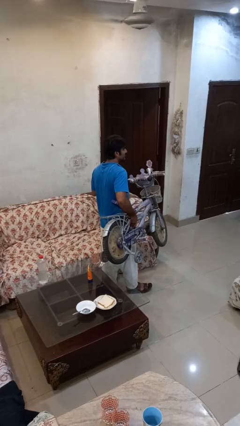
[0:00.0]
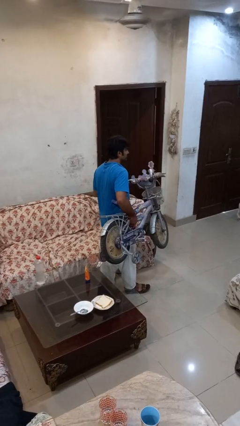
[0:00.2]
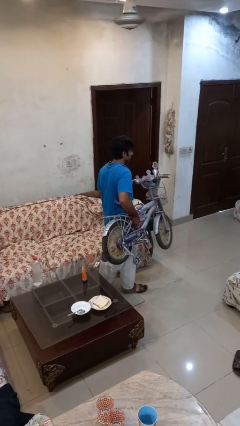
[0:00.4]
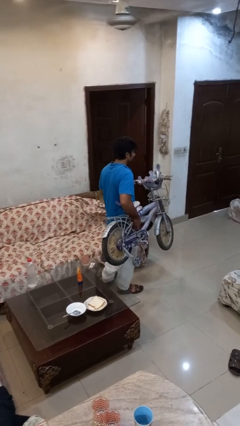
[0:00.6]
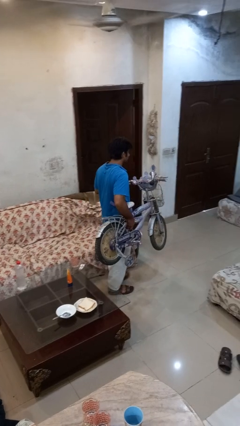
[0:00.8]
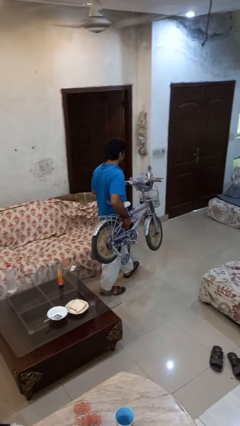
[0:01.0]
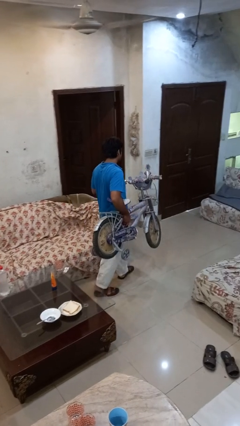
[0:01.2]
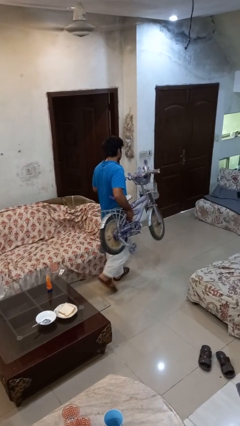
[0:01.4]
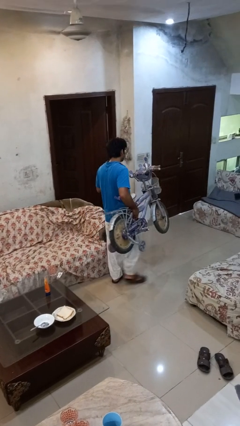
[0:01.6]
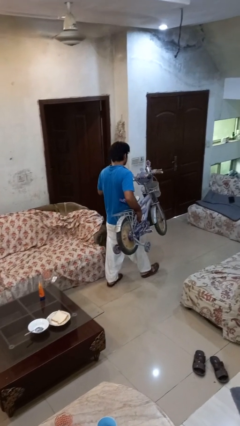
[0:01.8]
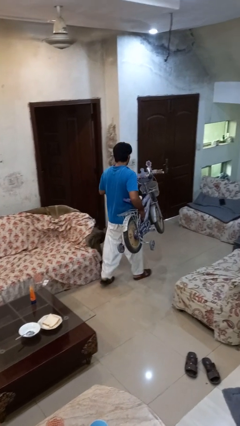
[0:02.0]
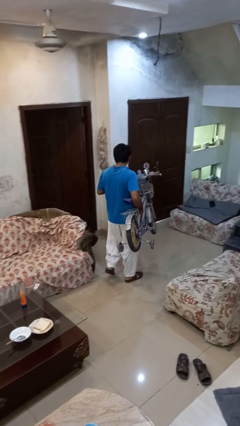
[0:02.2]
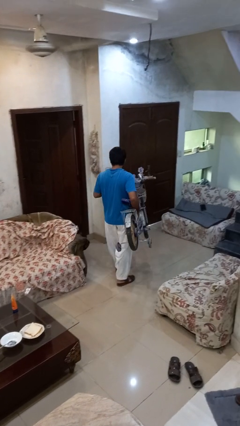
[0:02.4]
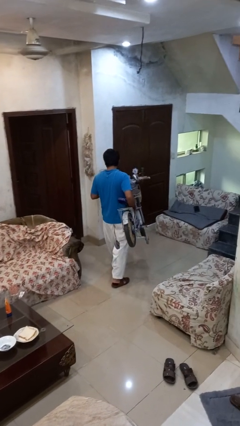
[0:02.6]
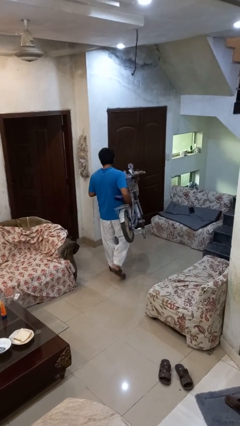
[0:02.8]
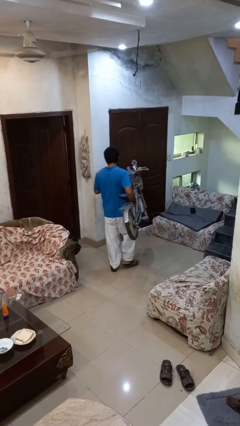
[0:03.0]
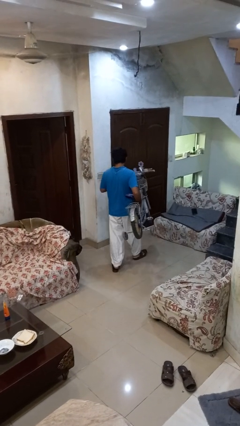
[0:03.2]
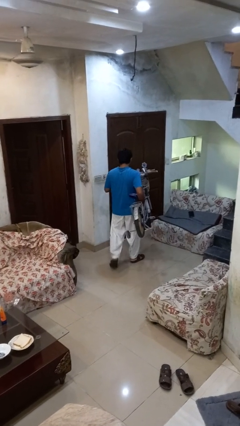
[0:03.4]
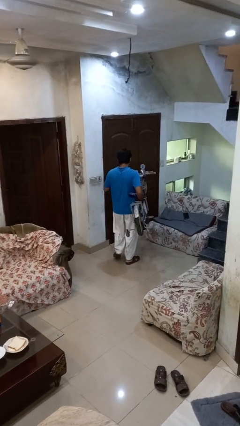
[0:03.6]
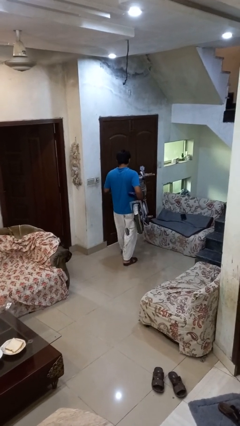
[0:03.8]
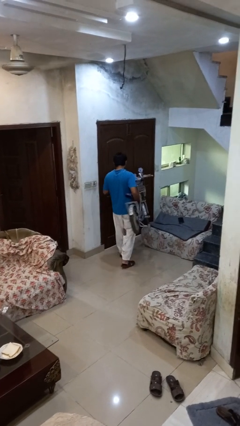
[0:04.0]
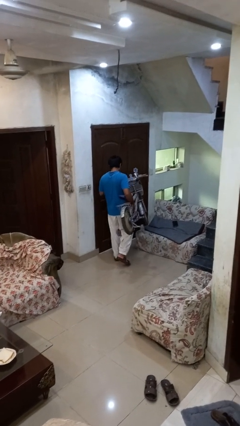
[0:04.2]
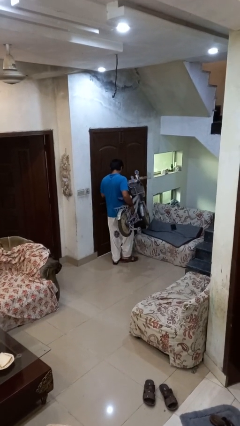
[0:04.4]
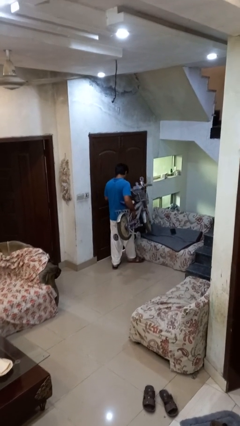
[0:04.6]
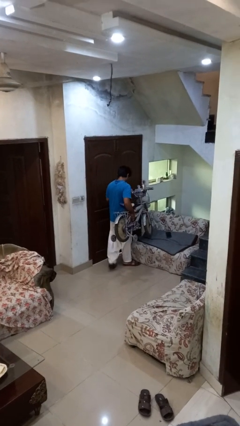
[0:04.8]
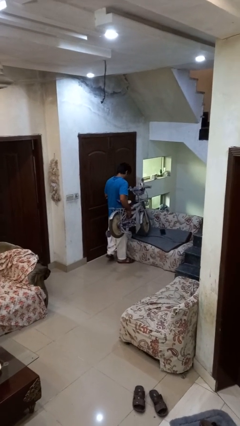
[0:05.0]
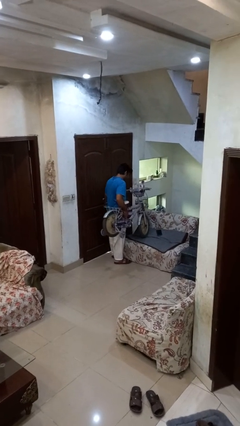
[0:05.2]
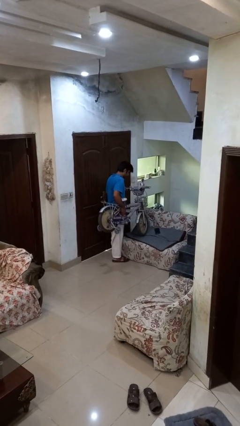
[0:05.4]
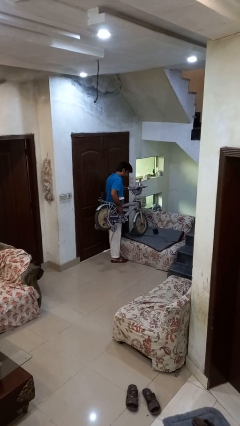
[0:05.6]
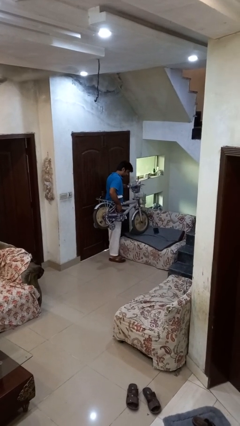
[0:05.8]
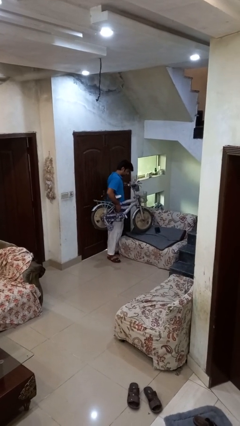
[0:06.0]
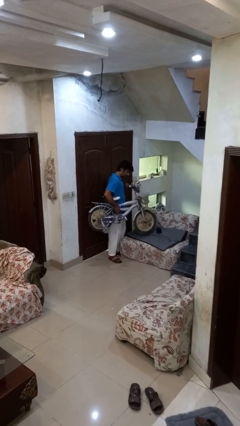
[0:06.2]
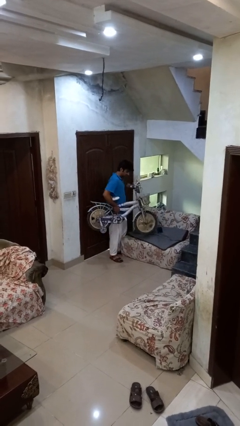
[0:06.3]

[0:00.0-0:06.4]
person carries bicycle

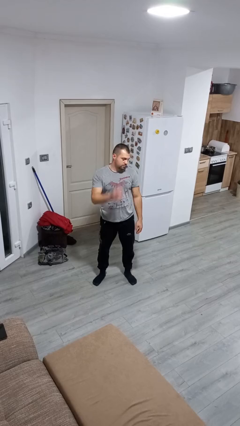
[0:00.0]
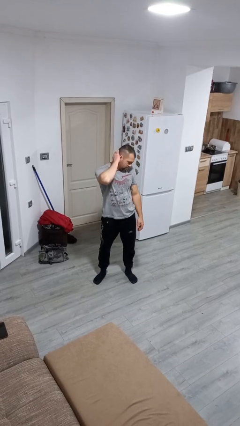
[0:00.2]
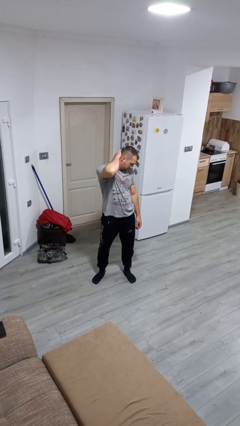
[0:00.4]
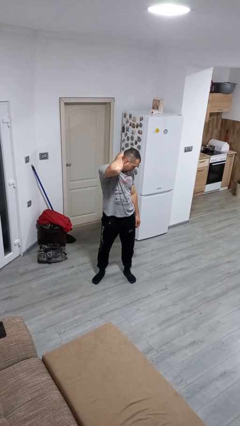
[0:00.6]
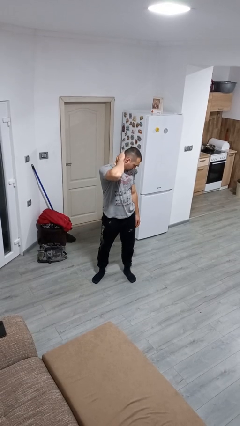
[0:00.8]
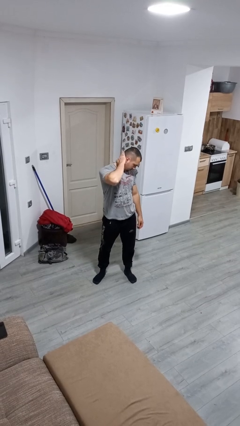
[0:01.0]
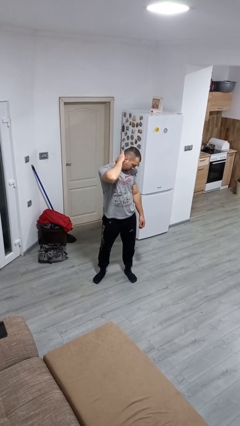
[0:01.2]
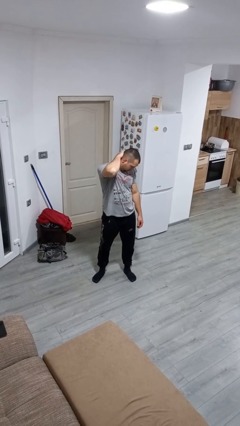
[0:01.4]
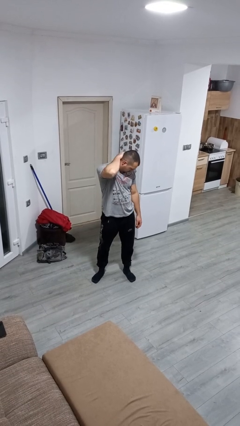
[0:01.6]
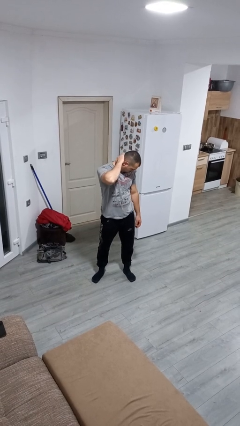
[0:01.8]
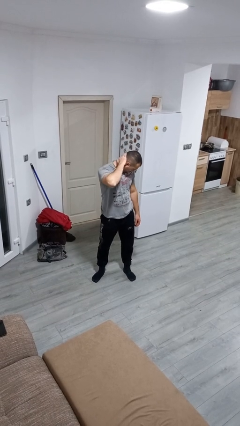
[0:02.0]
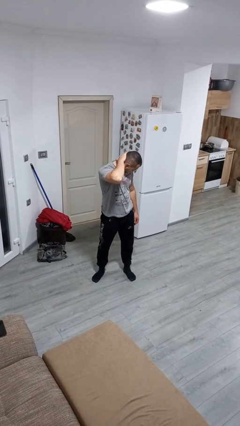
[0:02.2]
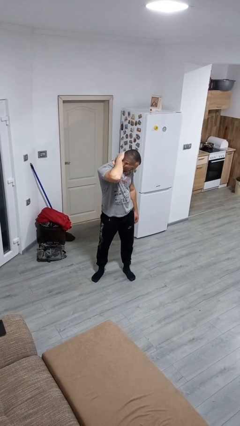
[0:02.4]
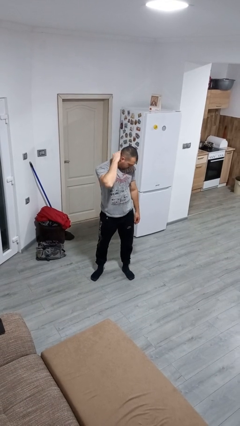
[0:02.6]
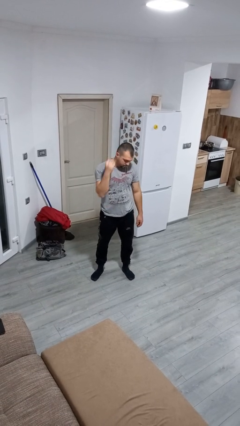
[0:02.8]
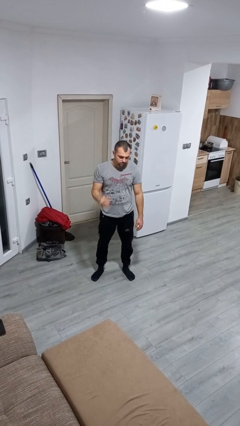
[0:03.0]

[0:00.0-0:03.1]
person rubs neck

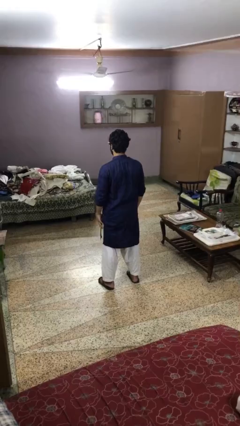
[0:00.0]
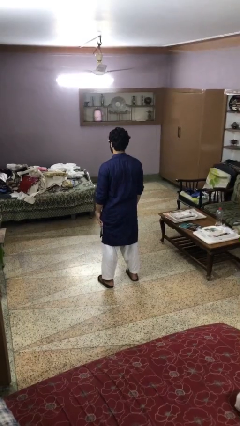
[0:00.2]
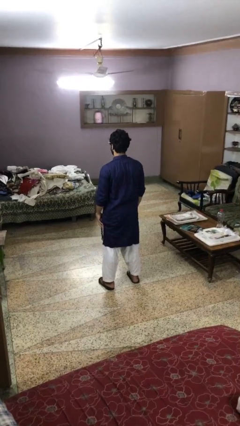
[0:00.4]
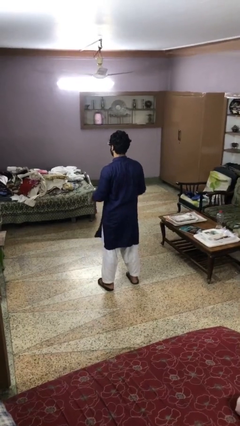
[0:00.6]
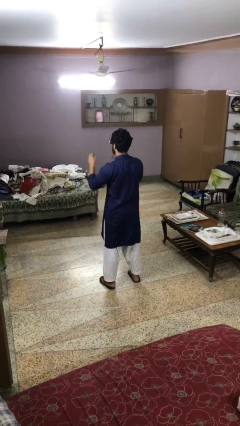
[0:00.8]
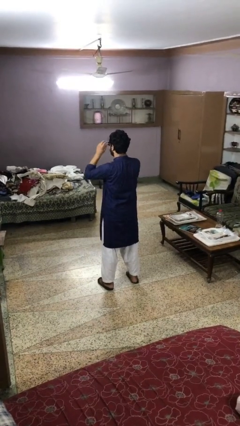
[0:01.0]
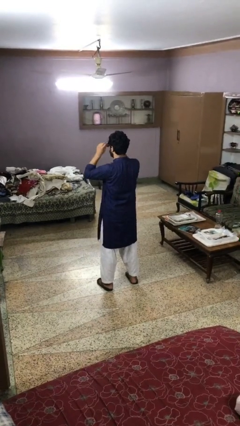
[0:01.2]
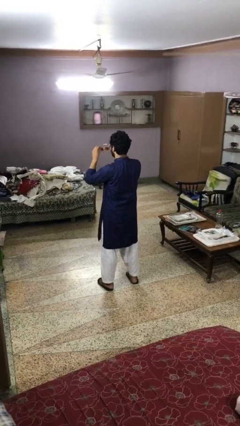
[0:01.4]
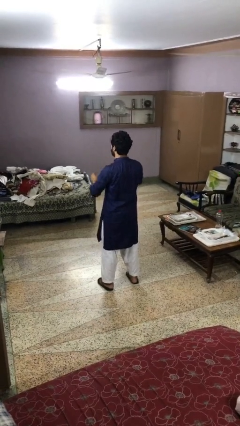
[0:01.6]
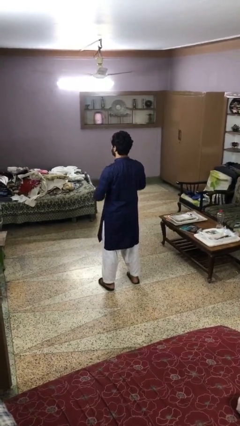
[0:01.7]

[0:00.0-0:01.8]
person takes off sunglasses

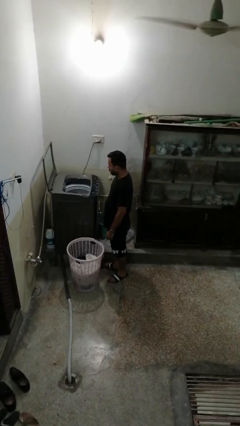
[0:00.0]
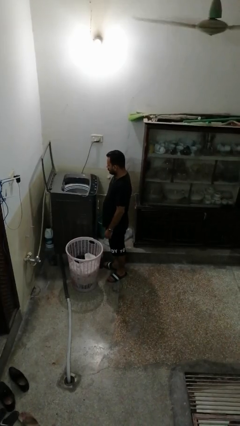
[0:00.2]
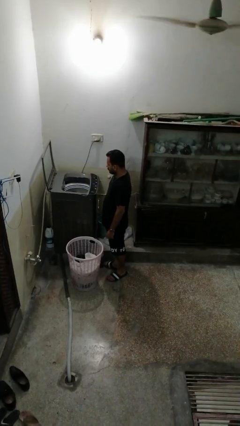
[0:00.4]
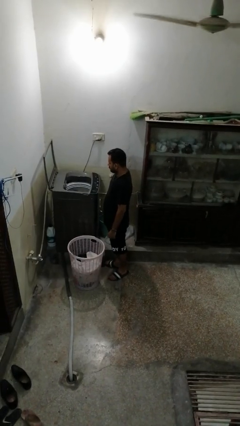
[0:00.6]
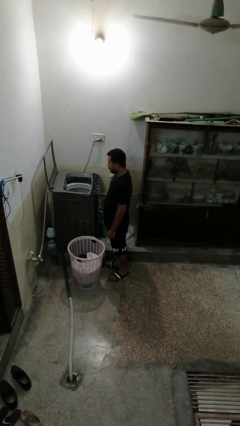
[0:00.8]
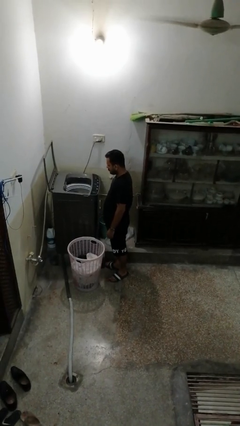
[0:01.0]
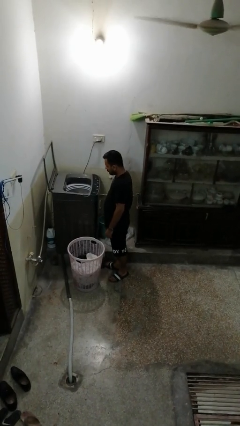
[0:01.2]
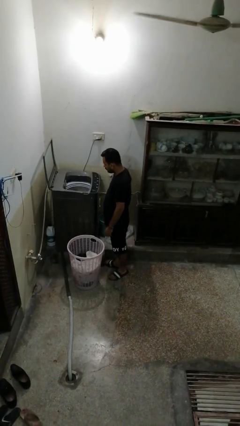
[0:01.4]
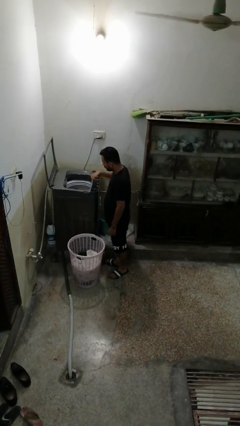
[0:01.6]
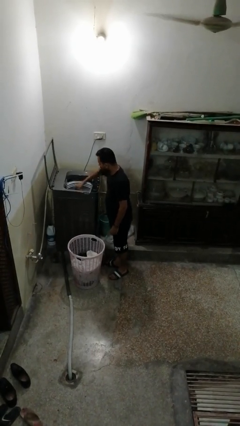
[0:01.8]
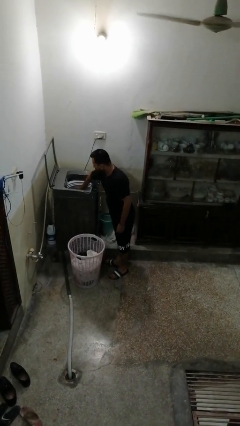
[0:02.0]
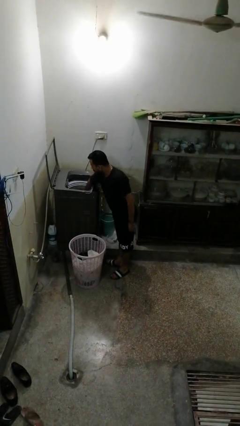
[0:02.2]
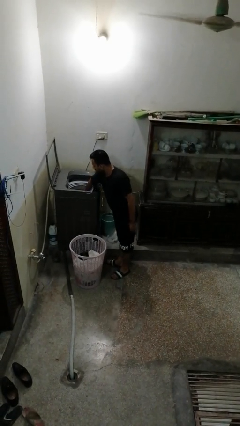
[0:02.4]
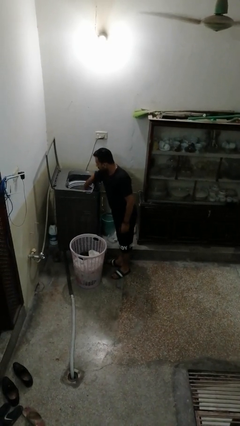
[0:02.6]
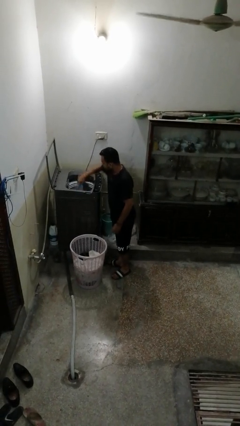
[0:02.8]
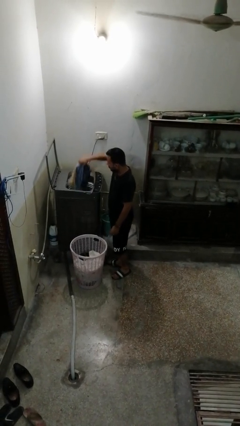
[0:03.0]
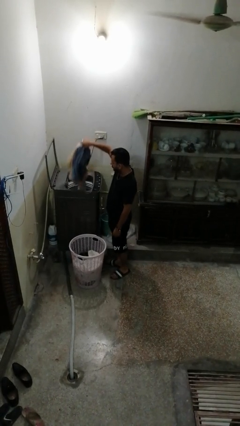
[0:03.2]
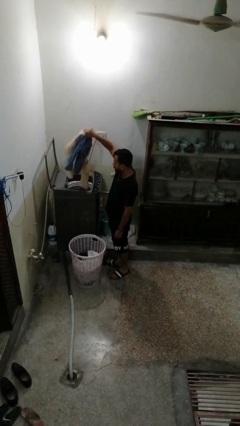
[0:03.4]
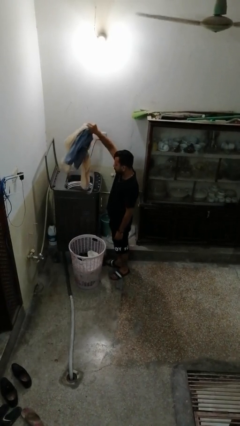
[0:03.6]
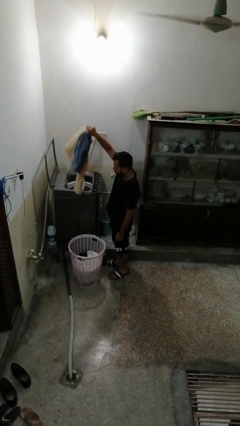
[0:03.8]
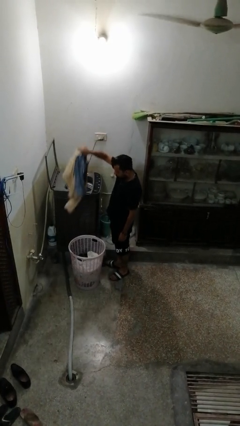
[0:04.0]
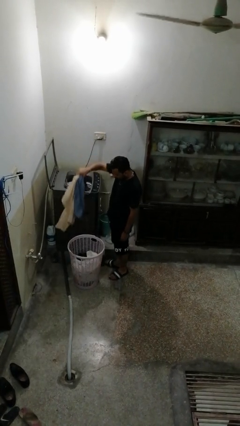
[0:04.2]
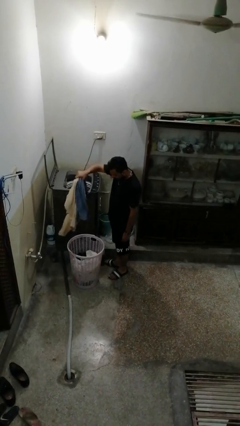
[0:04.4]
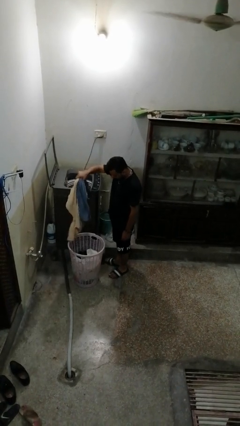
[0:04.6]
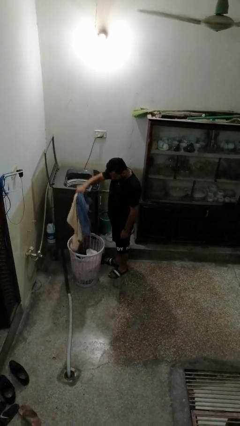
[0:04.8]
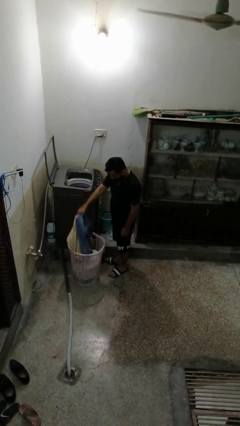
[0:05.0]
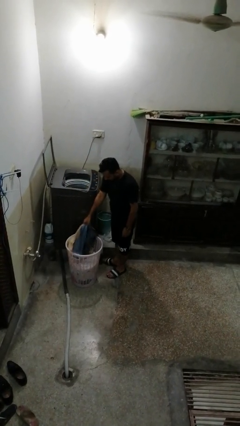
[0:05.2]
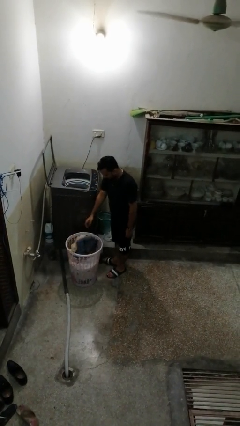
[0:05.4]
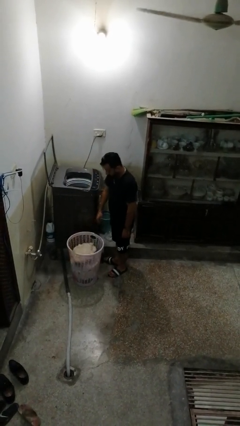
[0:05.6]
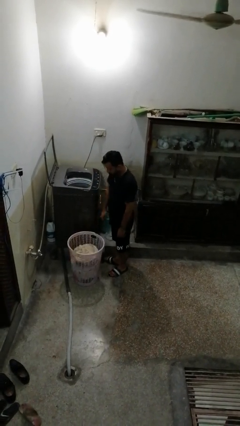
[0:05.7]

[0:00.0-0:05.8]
person unloads dryer

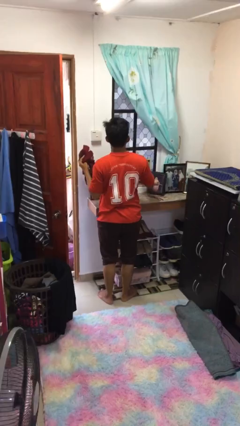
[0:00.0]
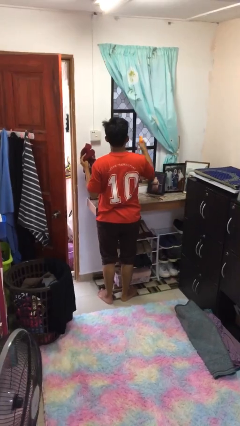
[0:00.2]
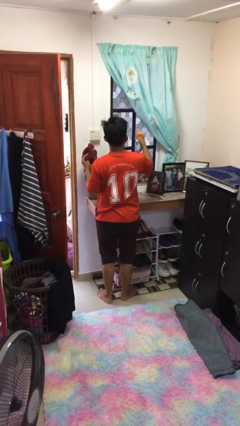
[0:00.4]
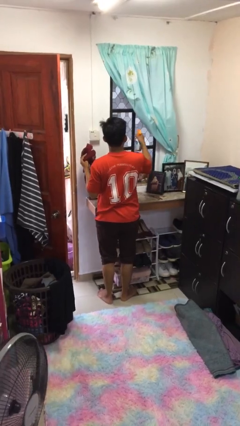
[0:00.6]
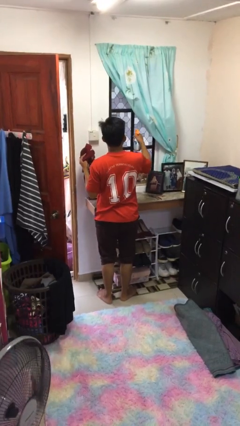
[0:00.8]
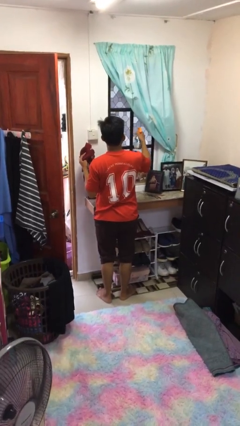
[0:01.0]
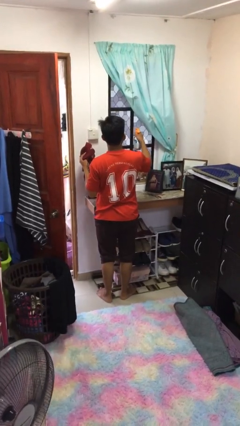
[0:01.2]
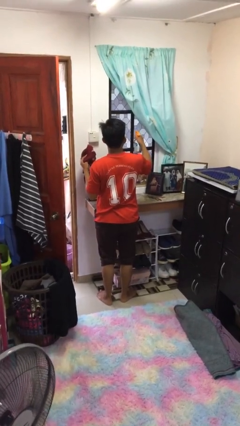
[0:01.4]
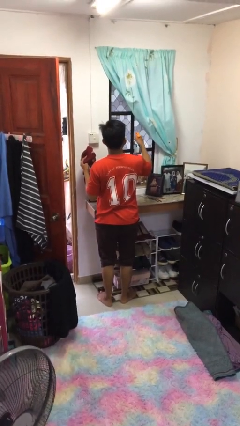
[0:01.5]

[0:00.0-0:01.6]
person sprays from bottle
